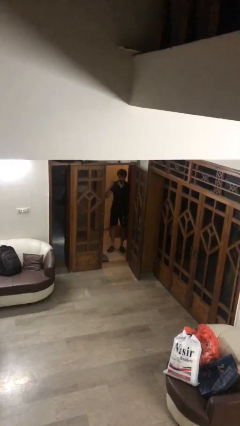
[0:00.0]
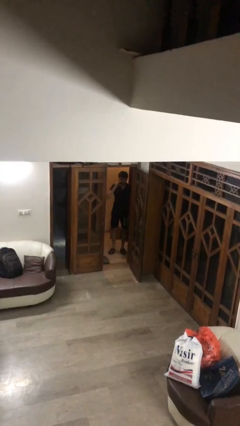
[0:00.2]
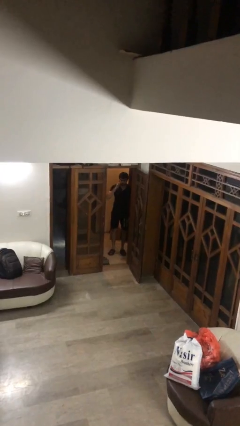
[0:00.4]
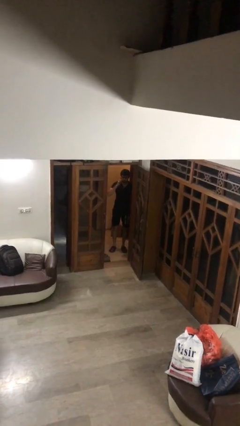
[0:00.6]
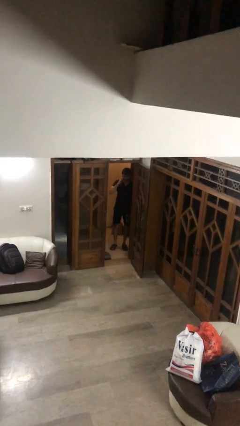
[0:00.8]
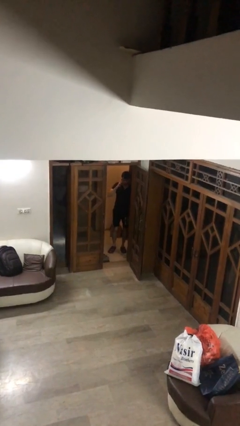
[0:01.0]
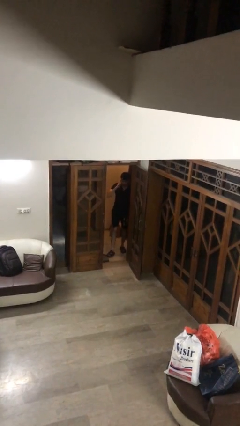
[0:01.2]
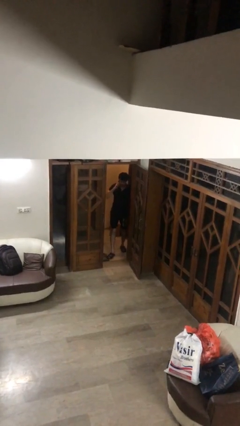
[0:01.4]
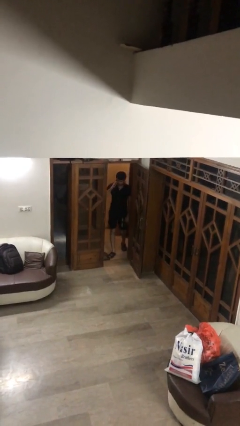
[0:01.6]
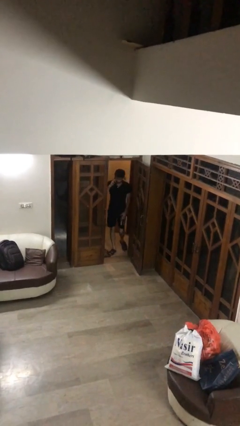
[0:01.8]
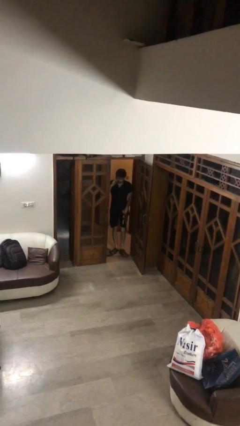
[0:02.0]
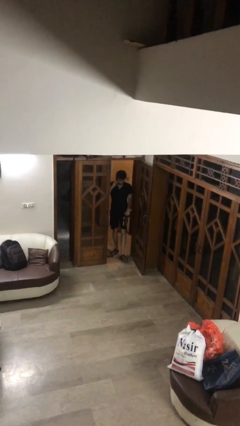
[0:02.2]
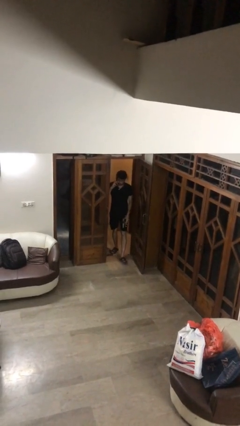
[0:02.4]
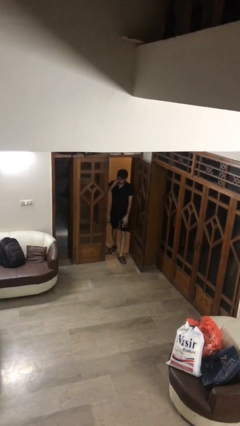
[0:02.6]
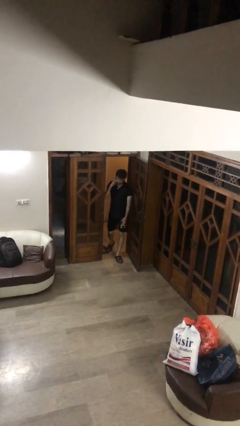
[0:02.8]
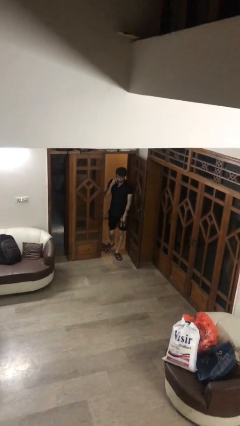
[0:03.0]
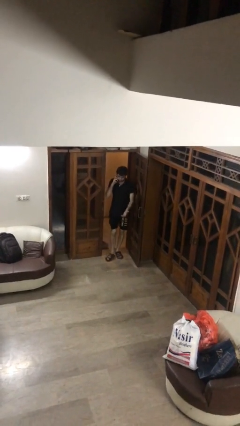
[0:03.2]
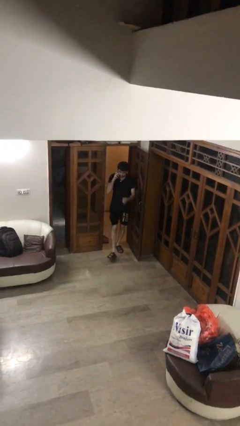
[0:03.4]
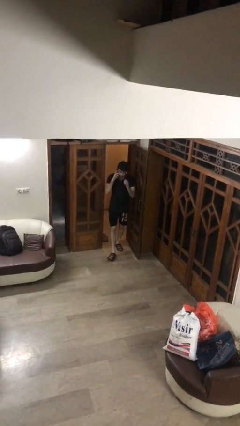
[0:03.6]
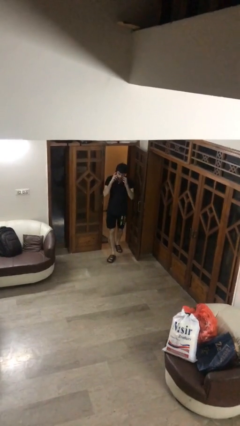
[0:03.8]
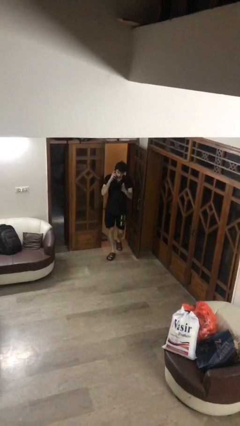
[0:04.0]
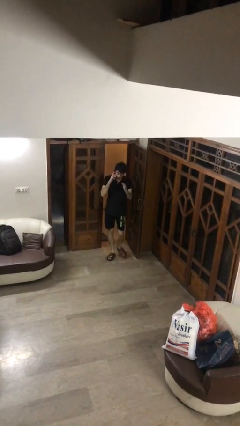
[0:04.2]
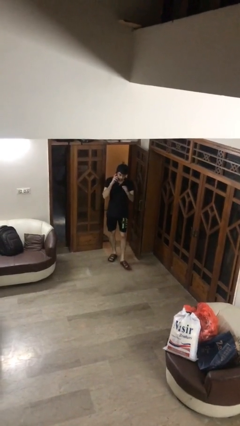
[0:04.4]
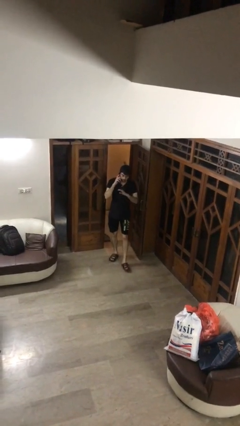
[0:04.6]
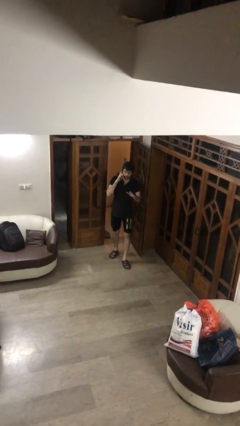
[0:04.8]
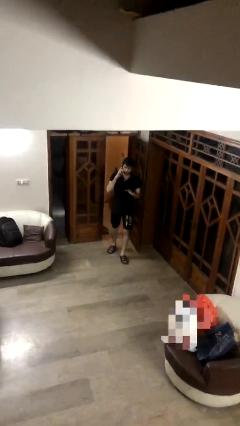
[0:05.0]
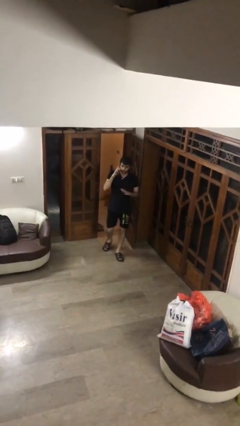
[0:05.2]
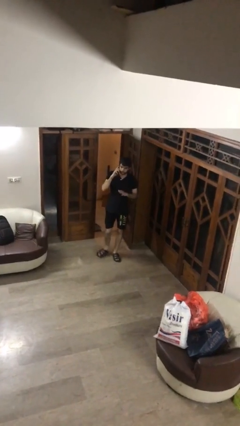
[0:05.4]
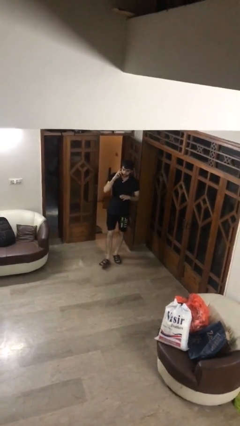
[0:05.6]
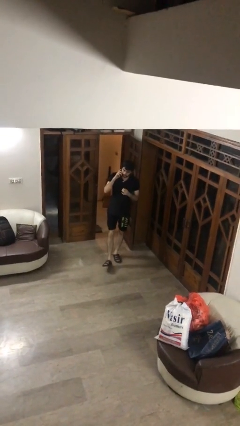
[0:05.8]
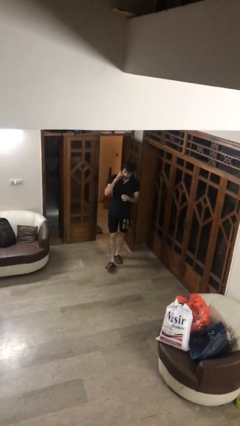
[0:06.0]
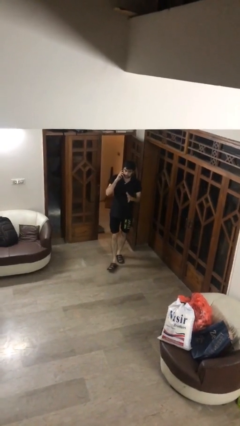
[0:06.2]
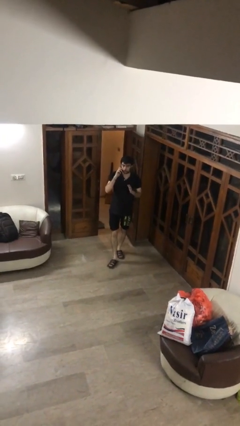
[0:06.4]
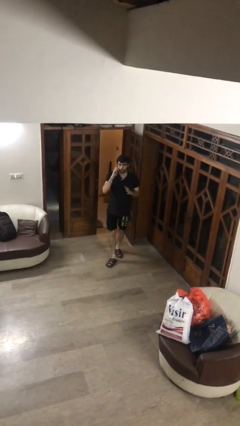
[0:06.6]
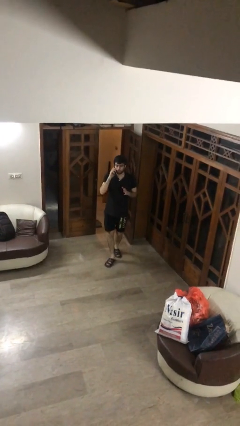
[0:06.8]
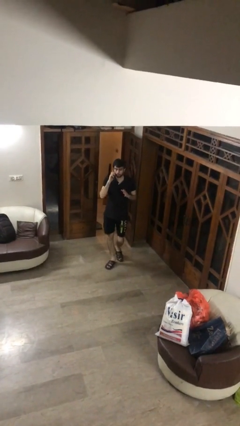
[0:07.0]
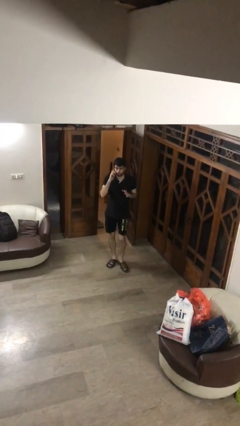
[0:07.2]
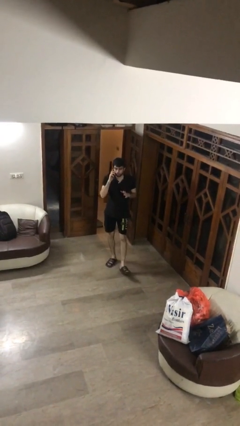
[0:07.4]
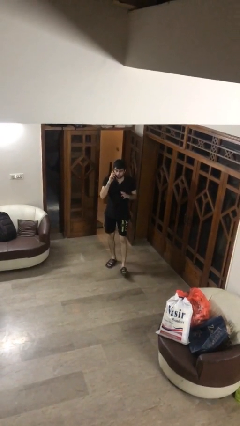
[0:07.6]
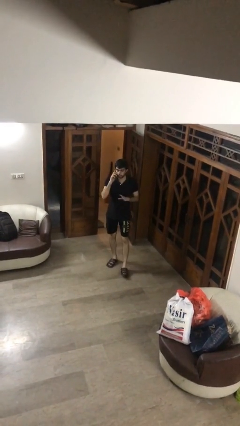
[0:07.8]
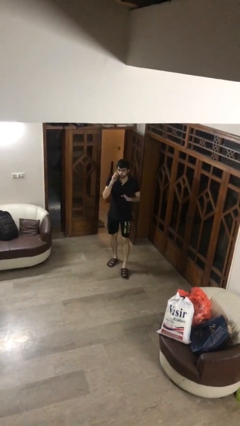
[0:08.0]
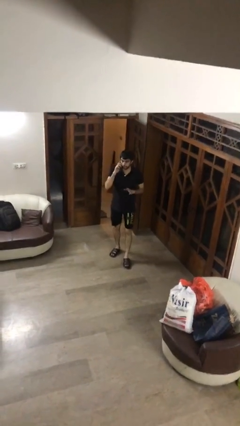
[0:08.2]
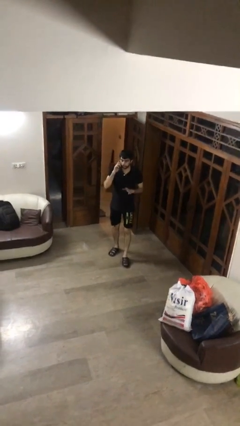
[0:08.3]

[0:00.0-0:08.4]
person enters scene through structure

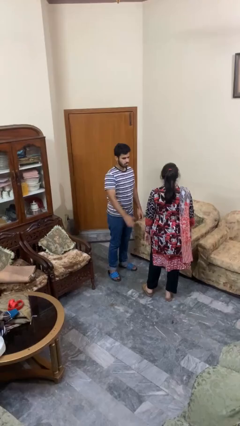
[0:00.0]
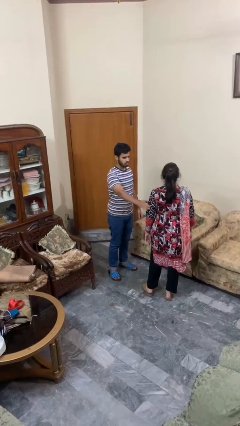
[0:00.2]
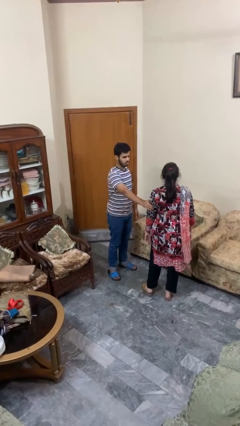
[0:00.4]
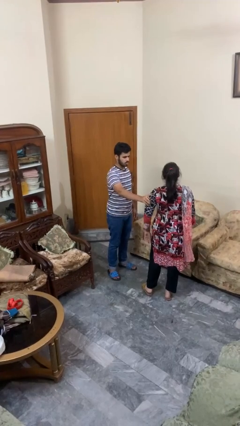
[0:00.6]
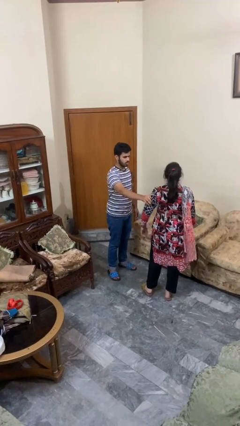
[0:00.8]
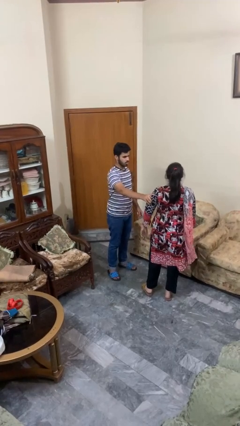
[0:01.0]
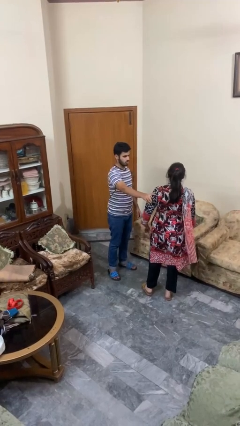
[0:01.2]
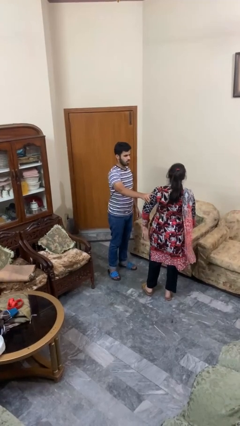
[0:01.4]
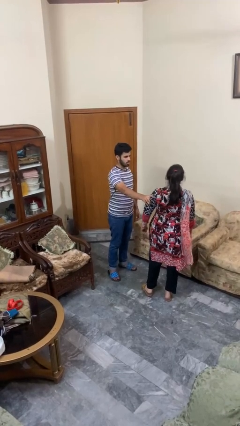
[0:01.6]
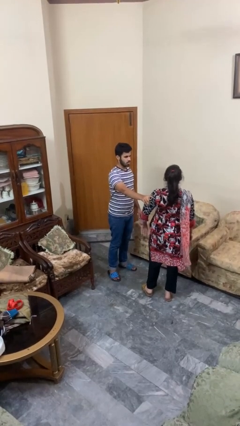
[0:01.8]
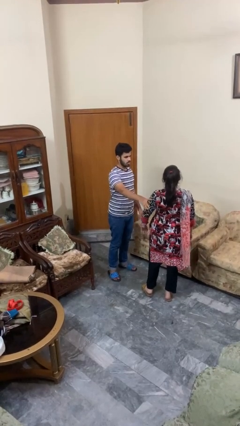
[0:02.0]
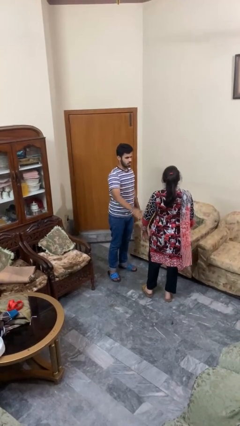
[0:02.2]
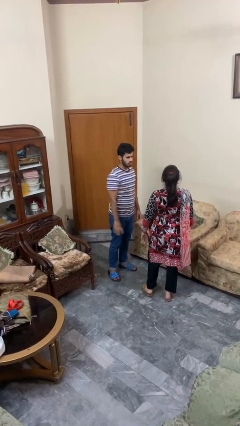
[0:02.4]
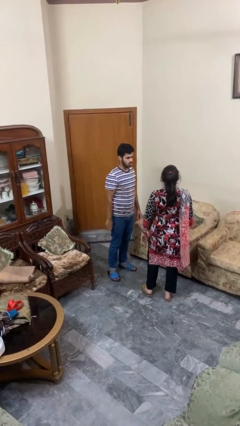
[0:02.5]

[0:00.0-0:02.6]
person grabs person by bicep

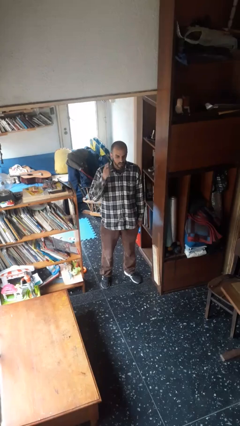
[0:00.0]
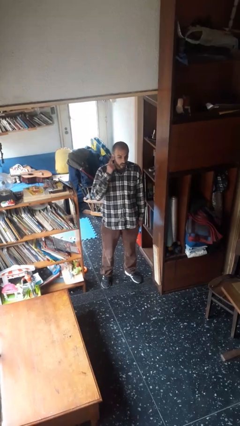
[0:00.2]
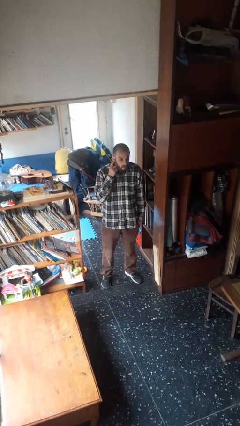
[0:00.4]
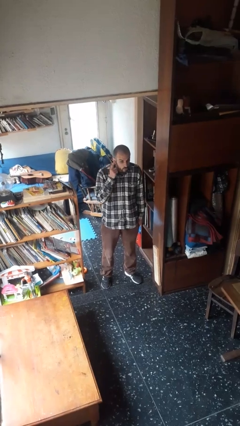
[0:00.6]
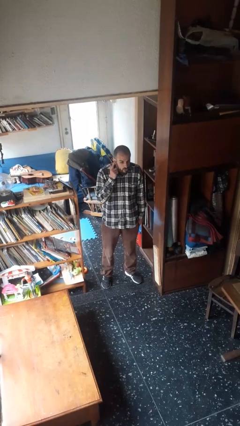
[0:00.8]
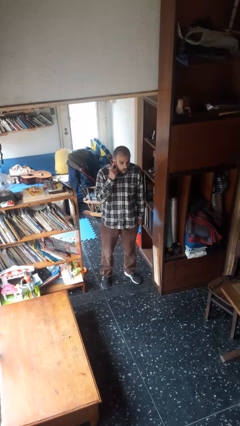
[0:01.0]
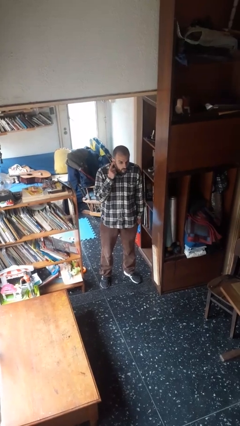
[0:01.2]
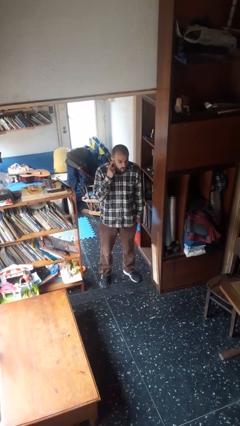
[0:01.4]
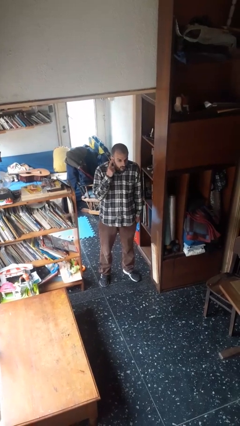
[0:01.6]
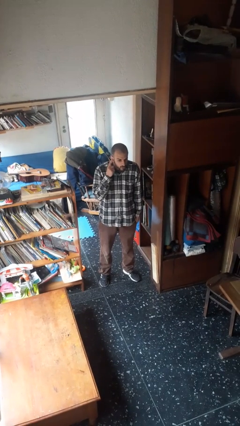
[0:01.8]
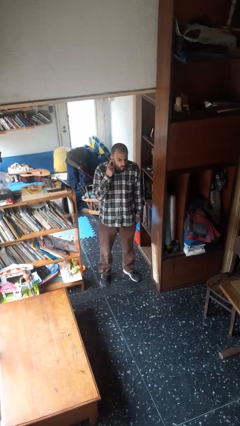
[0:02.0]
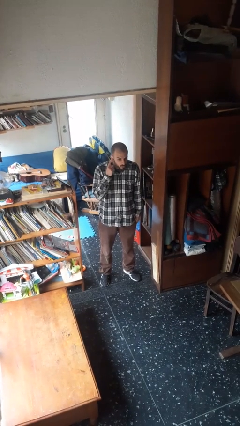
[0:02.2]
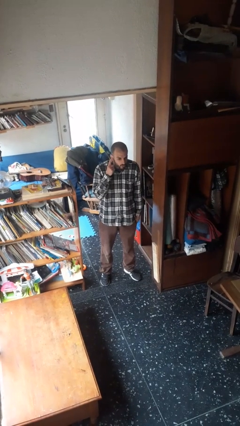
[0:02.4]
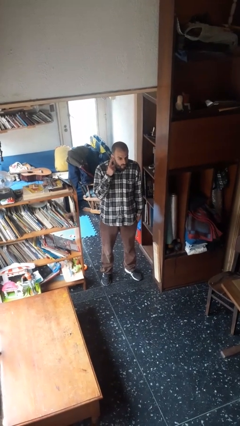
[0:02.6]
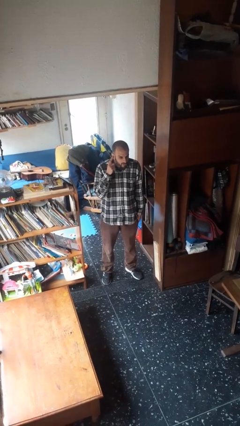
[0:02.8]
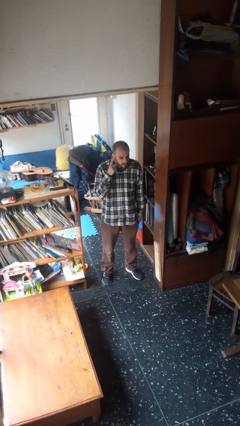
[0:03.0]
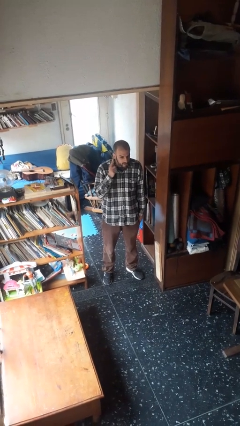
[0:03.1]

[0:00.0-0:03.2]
person gestures listen closely

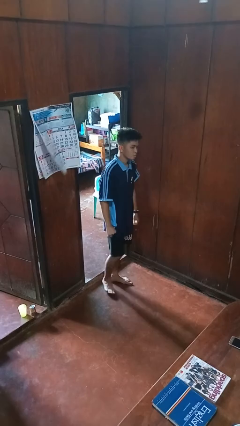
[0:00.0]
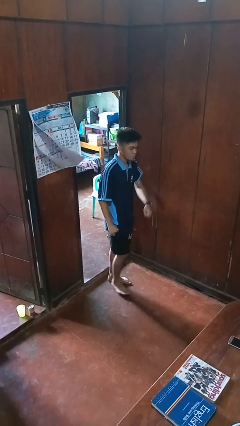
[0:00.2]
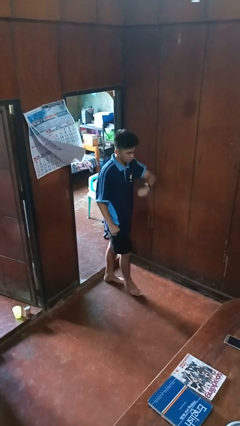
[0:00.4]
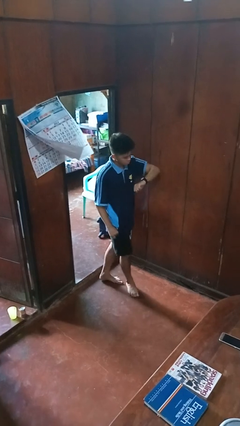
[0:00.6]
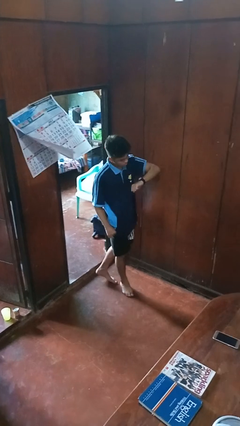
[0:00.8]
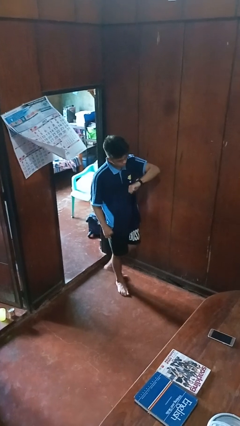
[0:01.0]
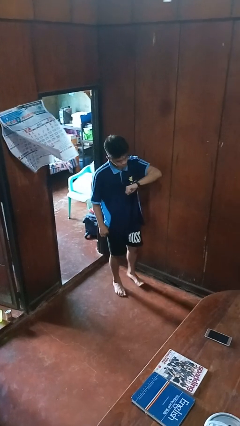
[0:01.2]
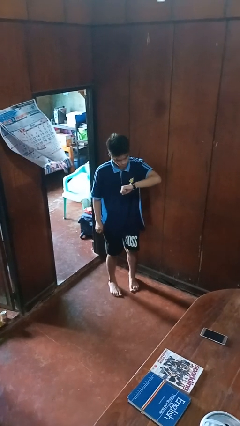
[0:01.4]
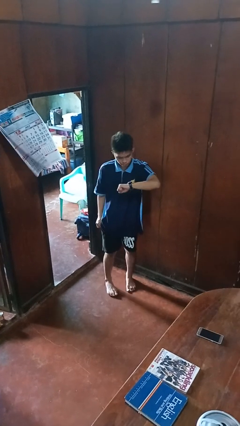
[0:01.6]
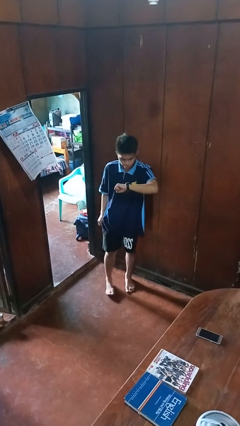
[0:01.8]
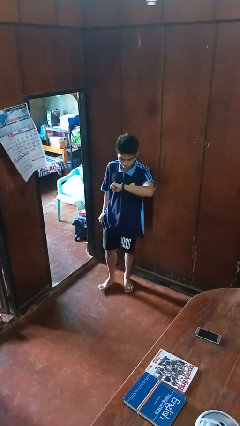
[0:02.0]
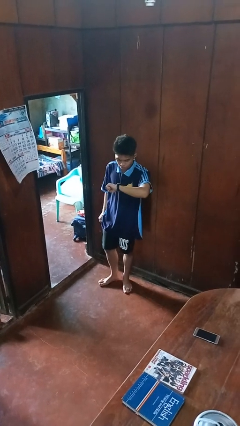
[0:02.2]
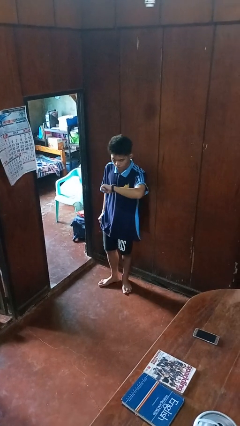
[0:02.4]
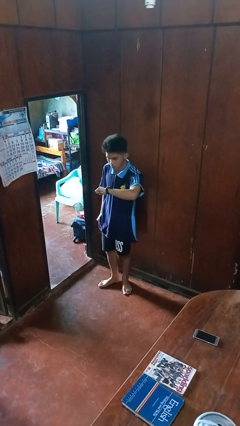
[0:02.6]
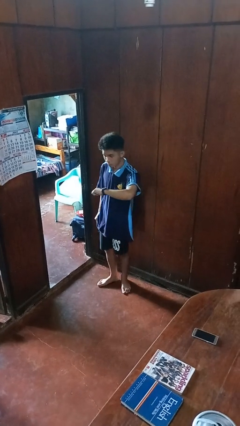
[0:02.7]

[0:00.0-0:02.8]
person looks at wristwatch

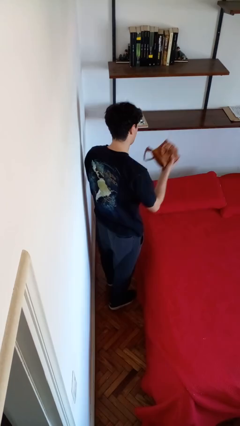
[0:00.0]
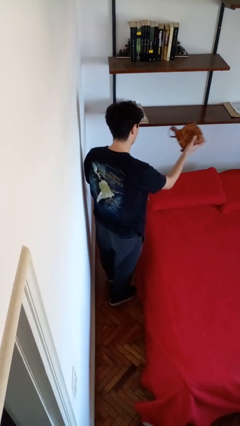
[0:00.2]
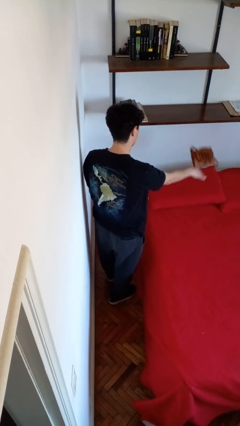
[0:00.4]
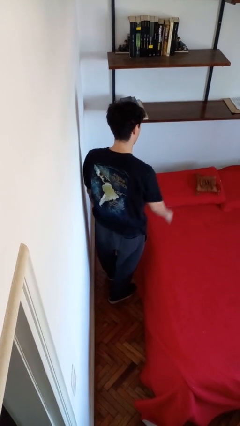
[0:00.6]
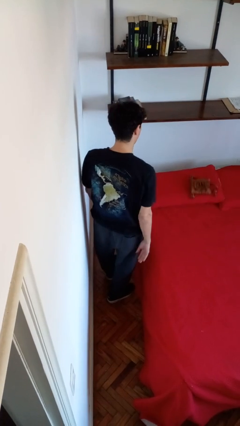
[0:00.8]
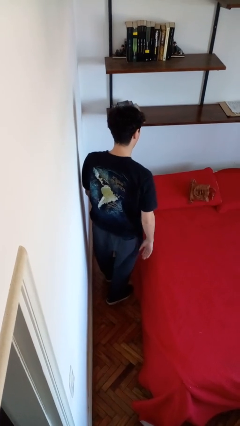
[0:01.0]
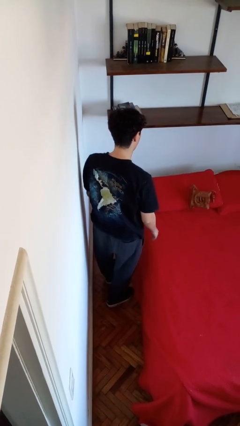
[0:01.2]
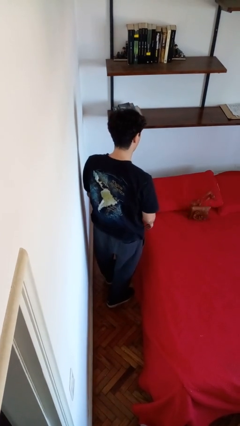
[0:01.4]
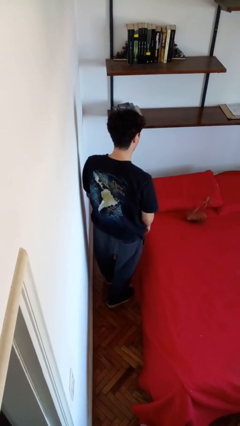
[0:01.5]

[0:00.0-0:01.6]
person throws object on bed
